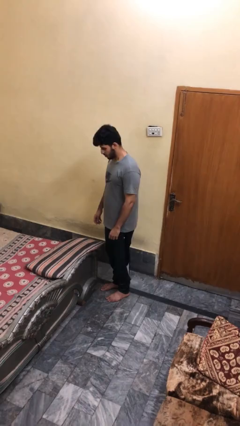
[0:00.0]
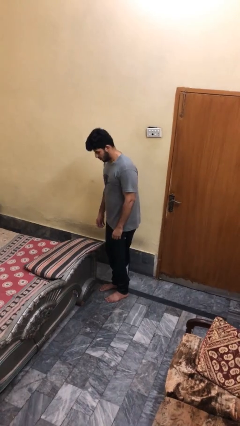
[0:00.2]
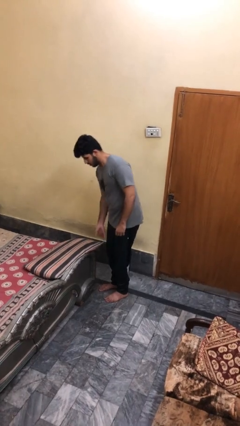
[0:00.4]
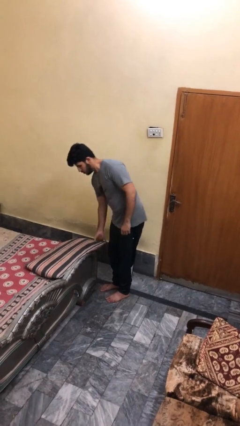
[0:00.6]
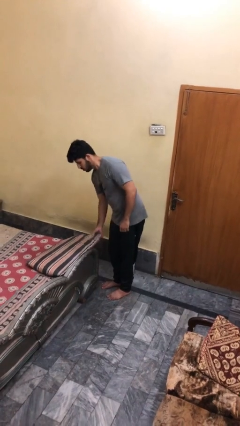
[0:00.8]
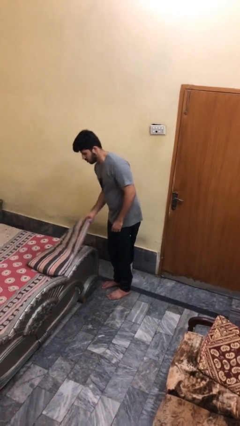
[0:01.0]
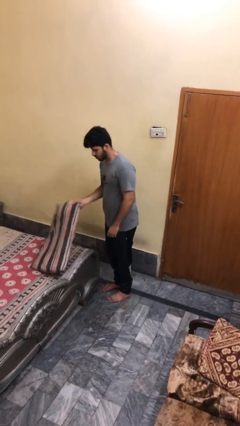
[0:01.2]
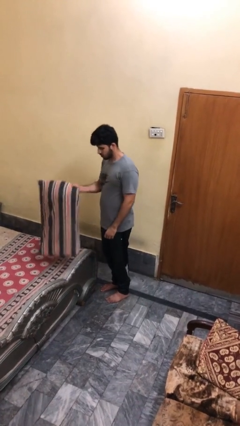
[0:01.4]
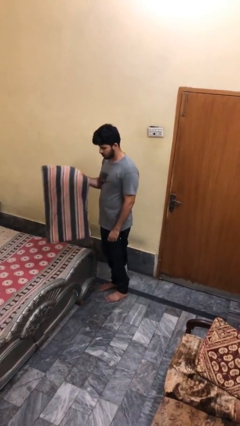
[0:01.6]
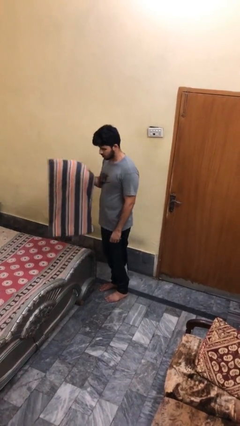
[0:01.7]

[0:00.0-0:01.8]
person picks up object from bed

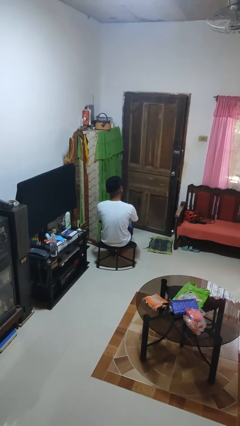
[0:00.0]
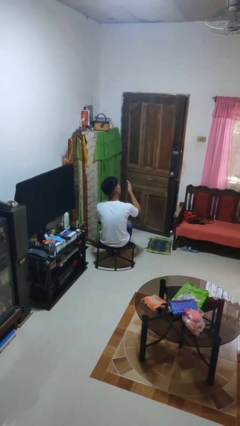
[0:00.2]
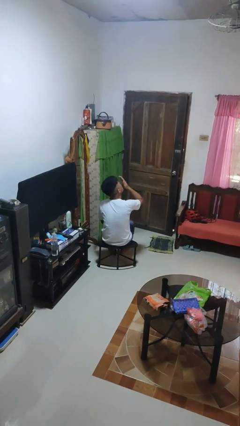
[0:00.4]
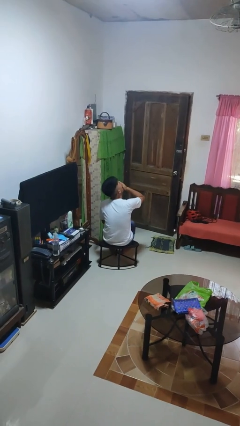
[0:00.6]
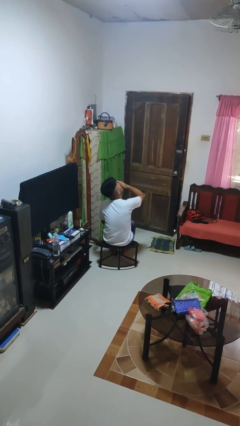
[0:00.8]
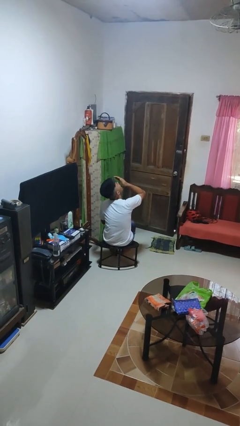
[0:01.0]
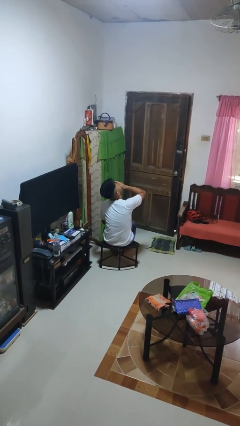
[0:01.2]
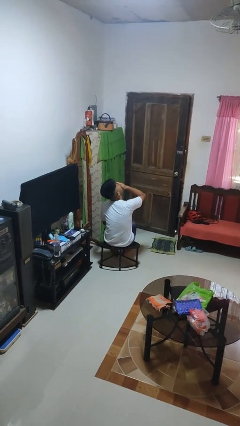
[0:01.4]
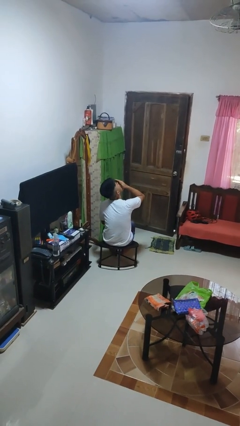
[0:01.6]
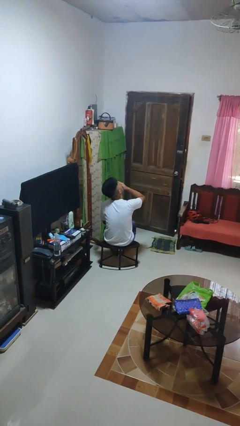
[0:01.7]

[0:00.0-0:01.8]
person yawns

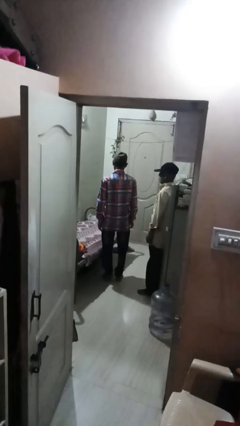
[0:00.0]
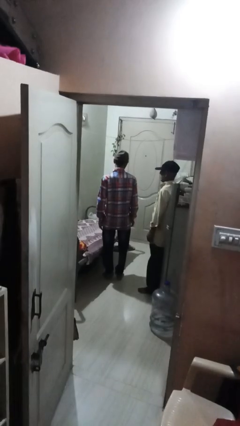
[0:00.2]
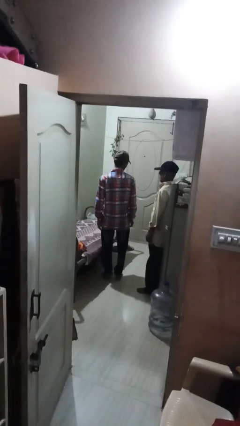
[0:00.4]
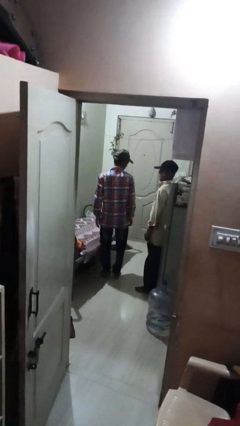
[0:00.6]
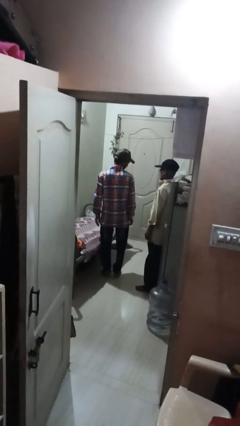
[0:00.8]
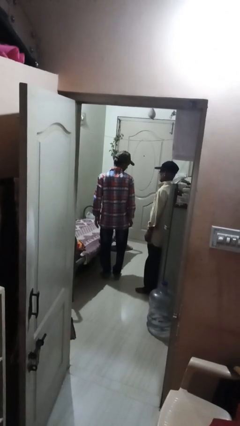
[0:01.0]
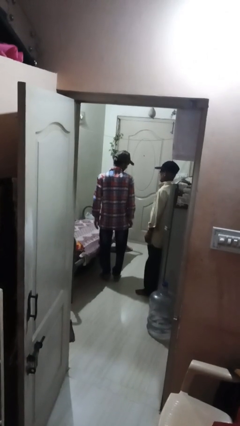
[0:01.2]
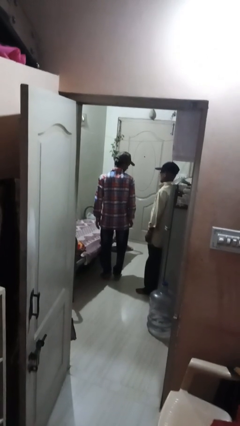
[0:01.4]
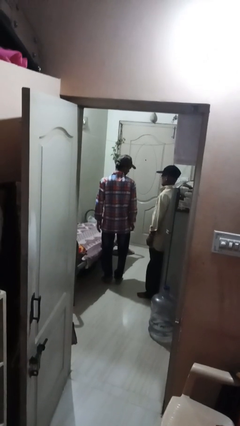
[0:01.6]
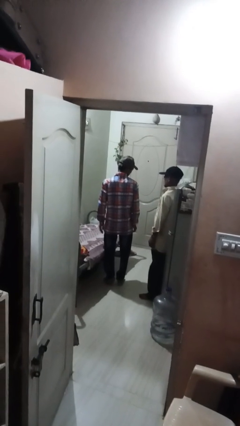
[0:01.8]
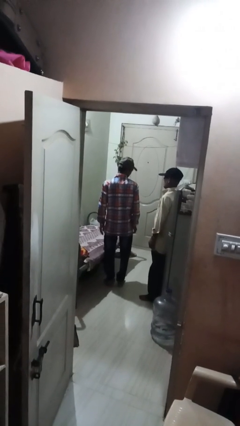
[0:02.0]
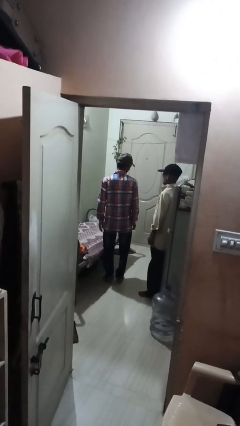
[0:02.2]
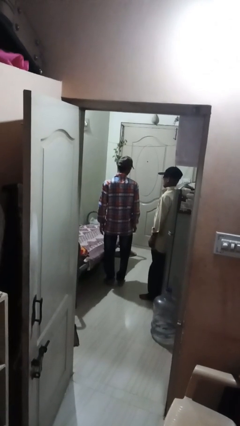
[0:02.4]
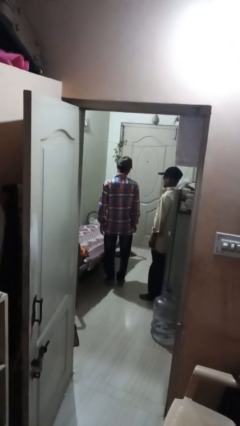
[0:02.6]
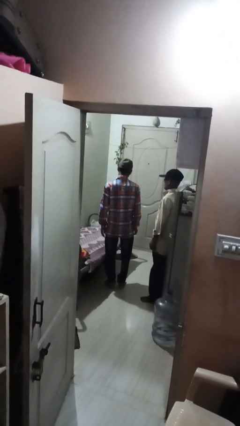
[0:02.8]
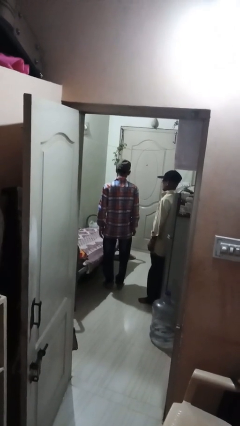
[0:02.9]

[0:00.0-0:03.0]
person looks over shoulder

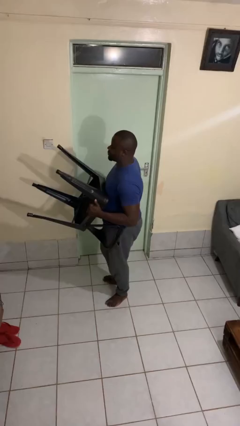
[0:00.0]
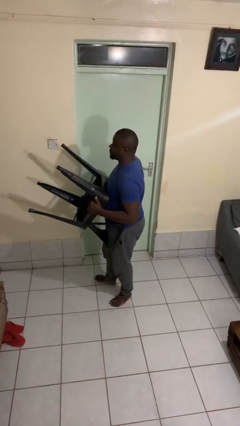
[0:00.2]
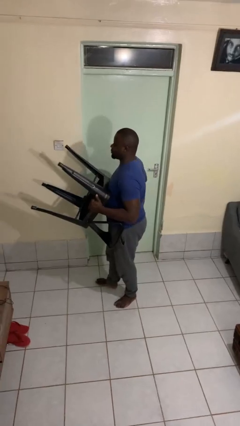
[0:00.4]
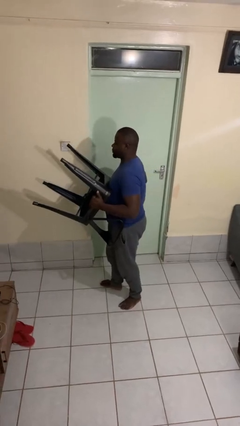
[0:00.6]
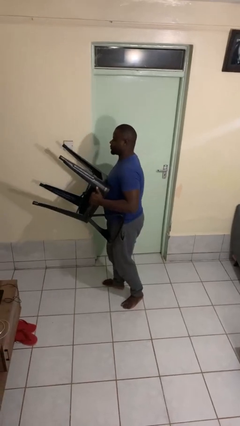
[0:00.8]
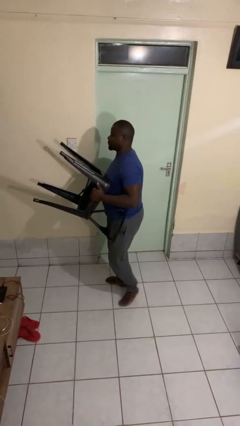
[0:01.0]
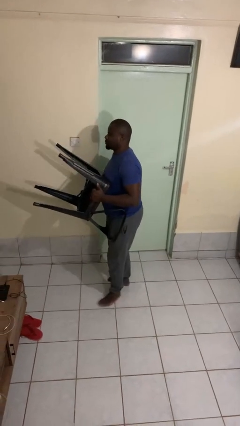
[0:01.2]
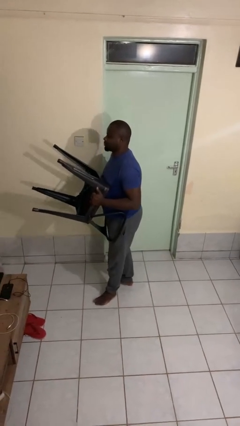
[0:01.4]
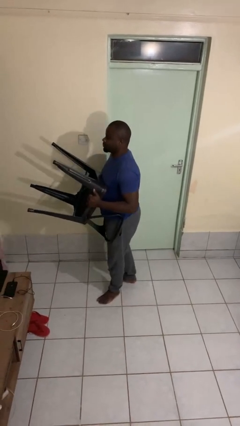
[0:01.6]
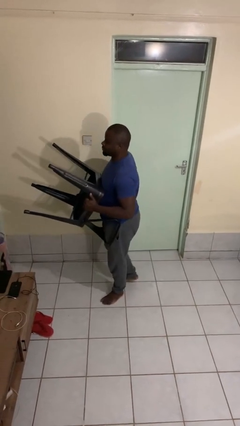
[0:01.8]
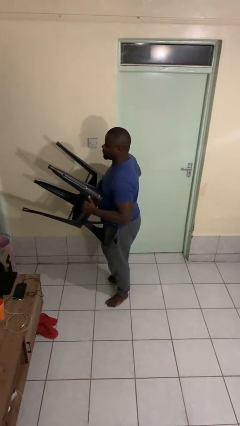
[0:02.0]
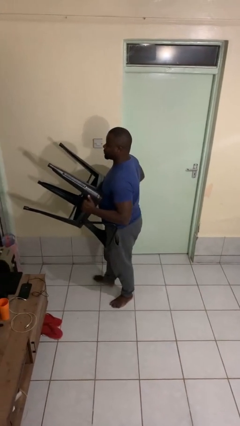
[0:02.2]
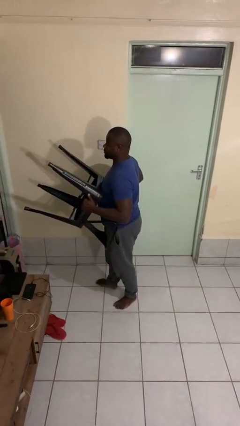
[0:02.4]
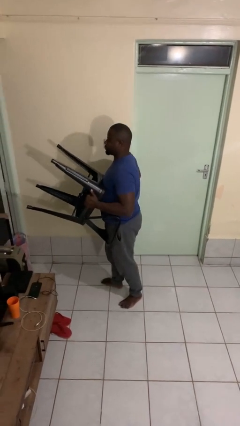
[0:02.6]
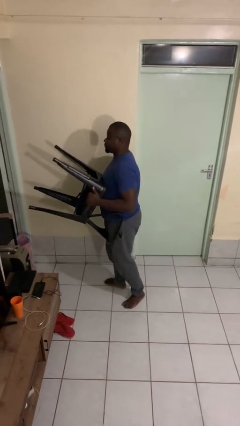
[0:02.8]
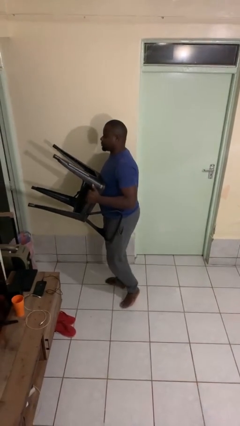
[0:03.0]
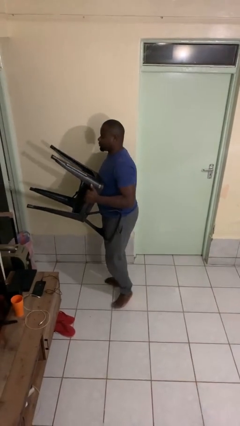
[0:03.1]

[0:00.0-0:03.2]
person carries furniture

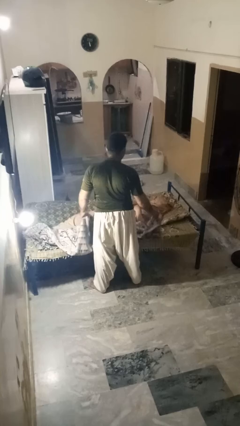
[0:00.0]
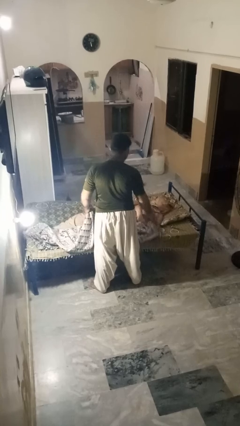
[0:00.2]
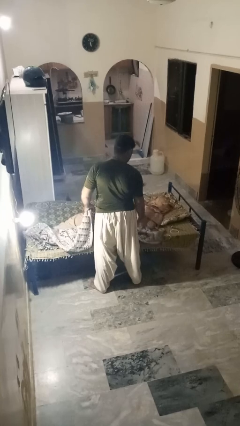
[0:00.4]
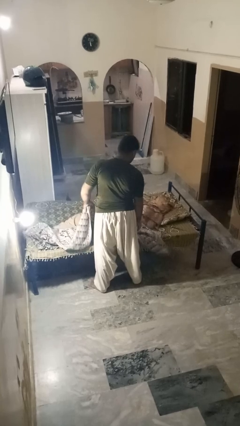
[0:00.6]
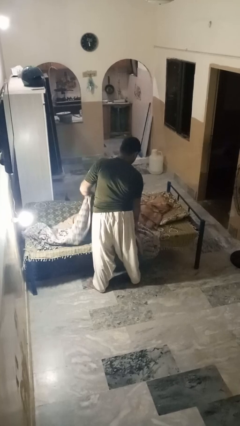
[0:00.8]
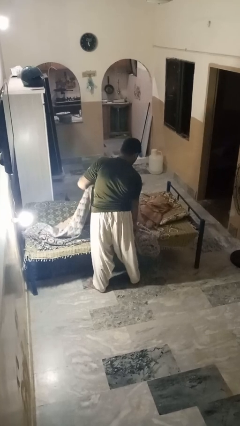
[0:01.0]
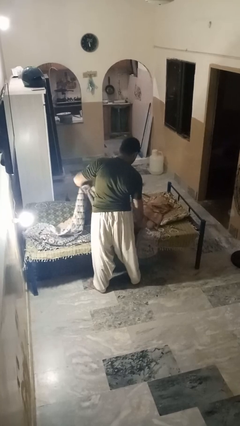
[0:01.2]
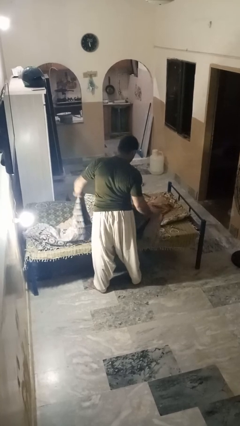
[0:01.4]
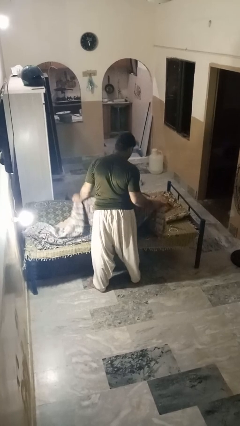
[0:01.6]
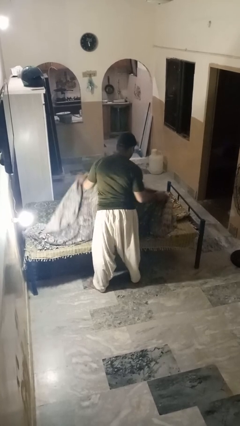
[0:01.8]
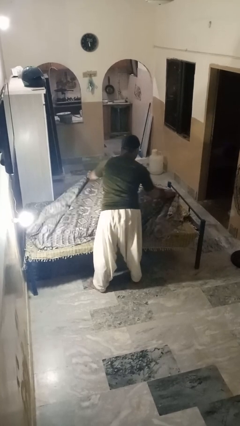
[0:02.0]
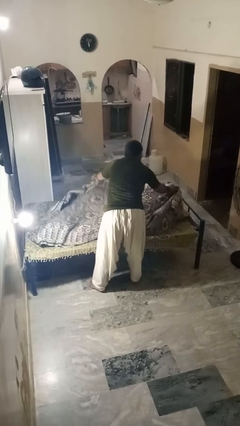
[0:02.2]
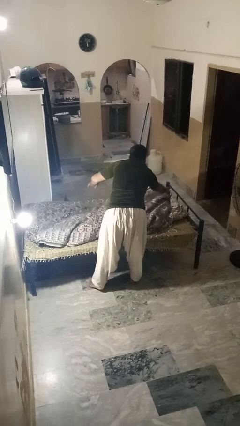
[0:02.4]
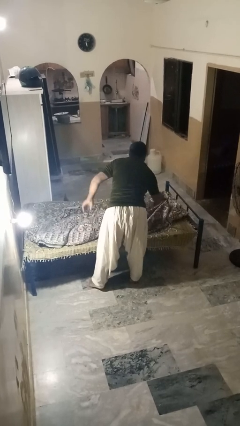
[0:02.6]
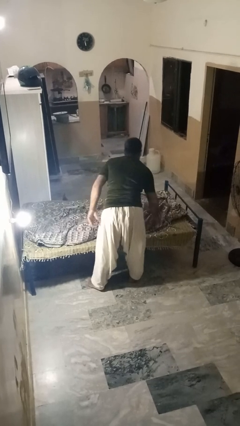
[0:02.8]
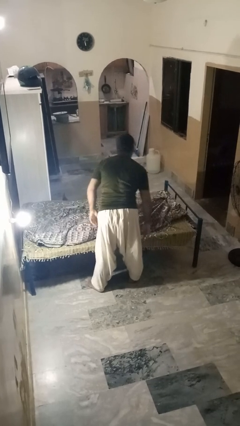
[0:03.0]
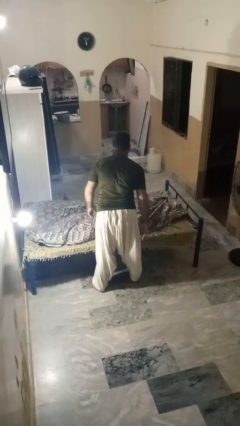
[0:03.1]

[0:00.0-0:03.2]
person covers friend with blanket

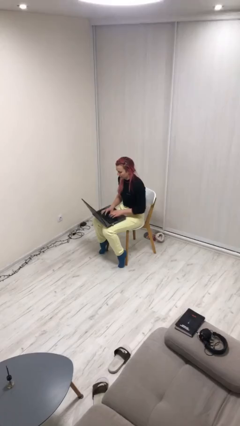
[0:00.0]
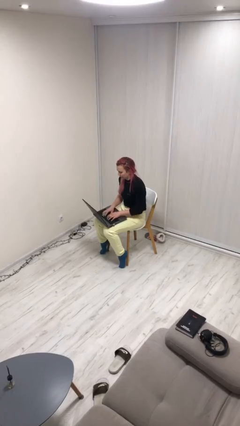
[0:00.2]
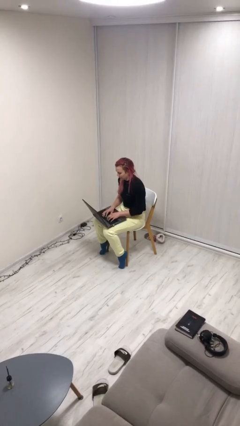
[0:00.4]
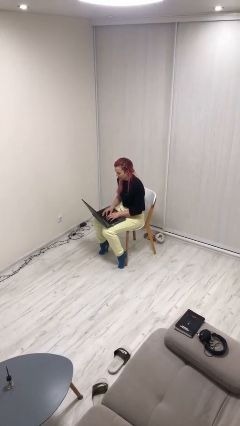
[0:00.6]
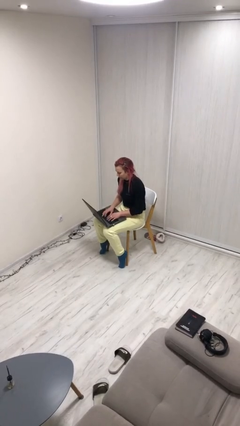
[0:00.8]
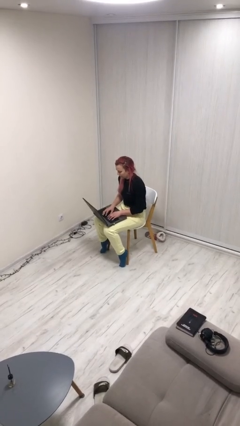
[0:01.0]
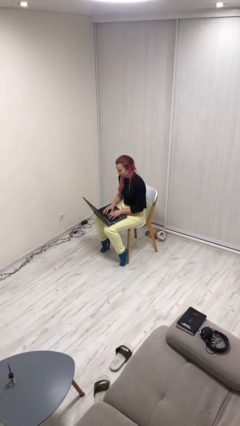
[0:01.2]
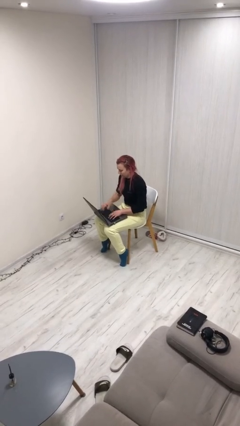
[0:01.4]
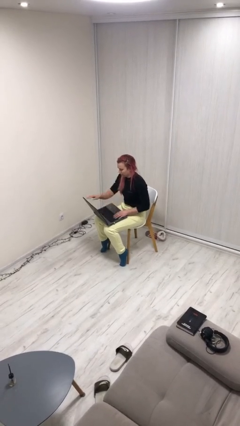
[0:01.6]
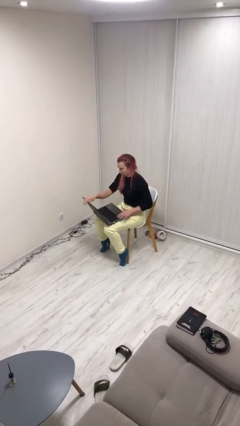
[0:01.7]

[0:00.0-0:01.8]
person interacts with laptop

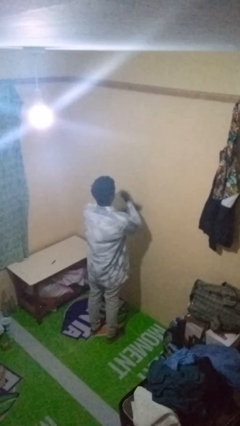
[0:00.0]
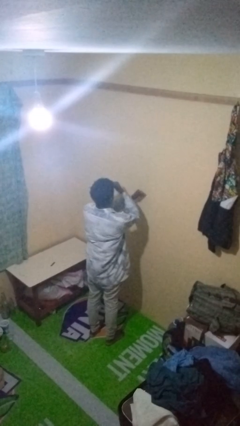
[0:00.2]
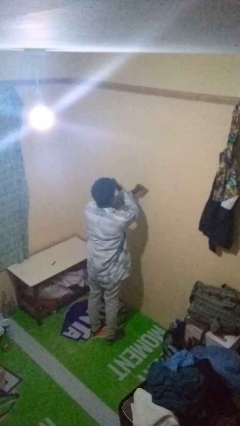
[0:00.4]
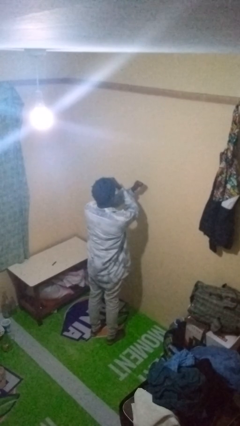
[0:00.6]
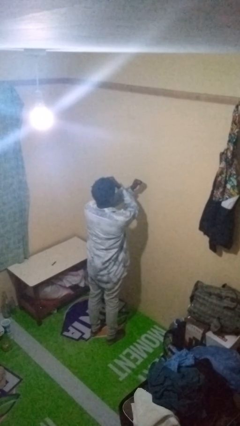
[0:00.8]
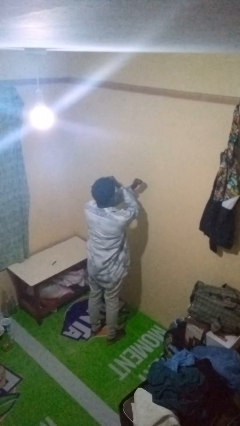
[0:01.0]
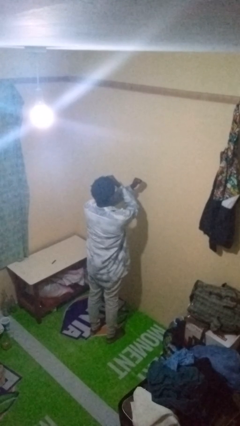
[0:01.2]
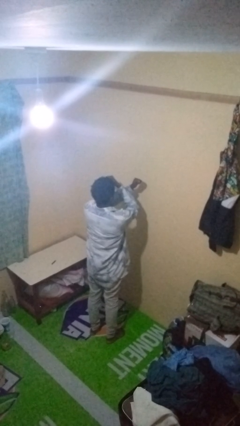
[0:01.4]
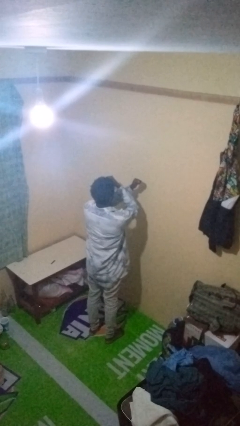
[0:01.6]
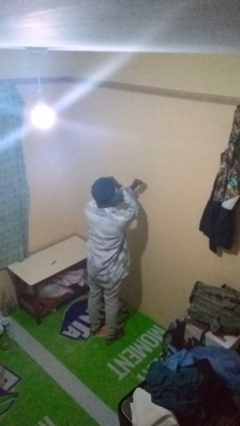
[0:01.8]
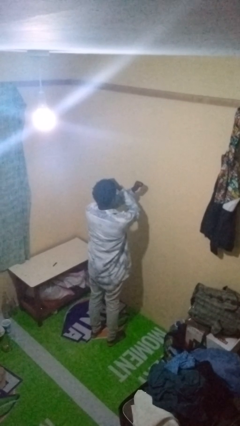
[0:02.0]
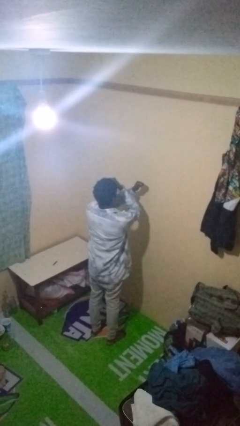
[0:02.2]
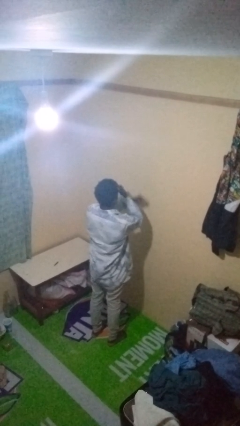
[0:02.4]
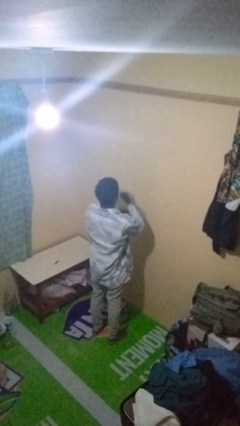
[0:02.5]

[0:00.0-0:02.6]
person gestures arms x

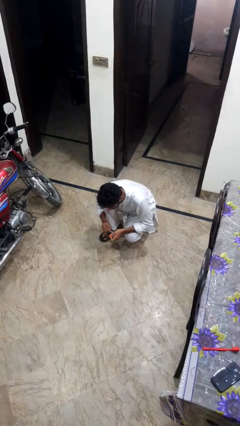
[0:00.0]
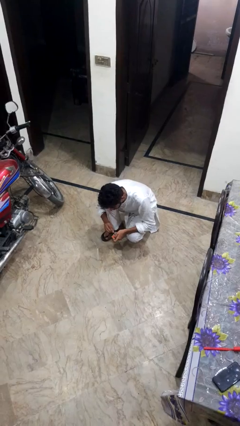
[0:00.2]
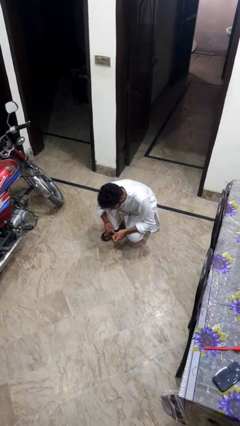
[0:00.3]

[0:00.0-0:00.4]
person extinguishes candle
